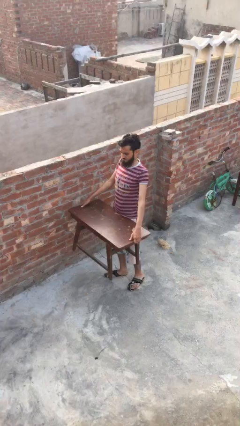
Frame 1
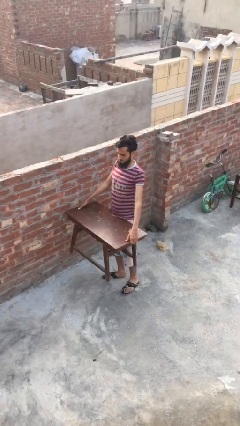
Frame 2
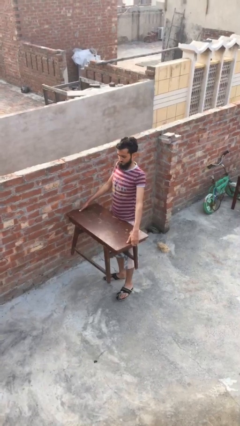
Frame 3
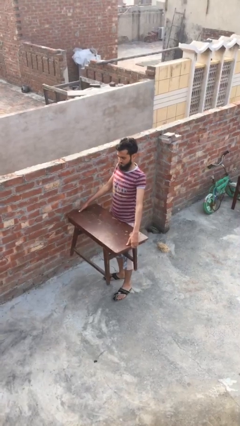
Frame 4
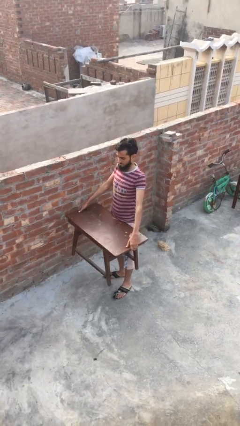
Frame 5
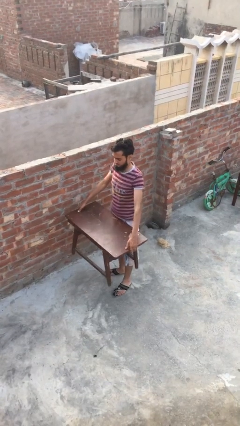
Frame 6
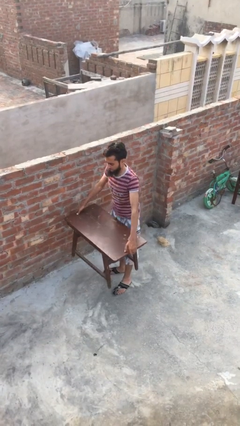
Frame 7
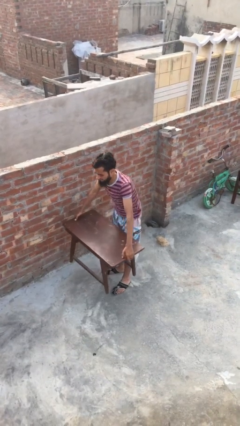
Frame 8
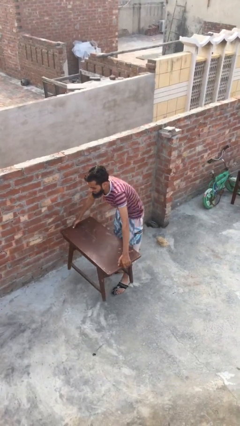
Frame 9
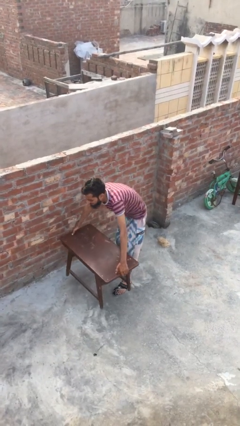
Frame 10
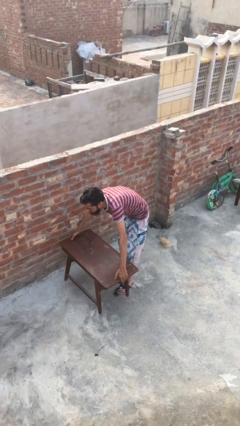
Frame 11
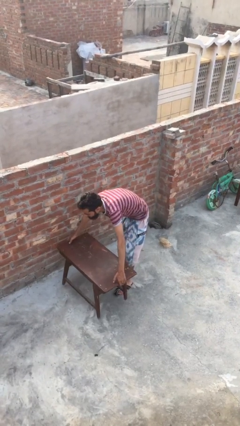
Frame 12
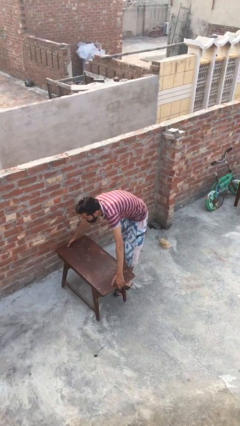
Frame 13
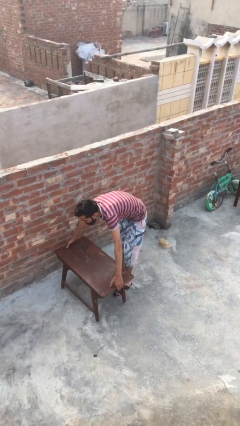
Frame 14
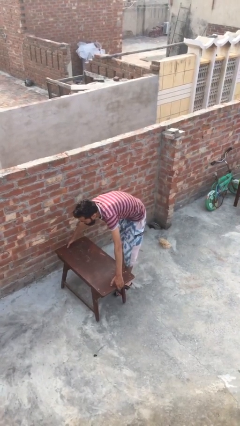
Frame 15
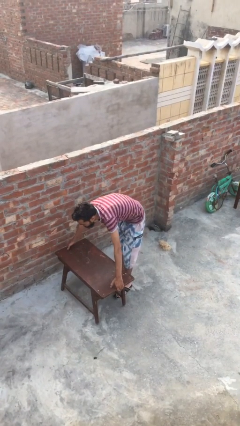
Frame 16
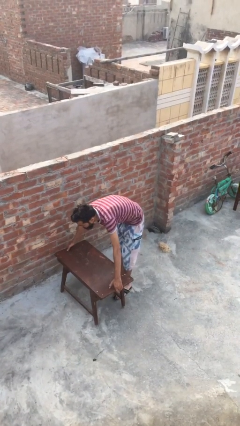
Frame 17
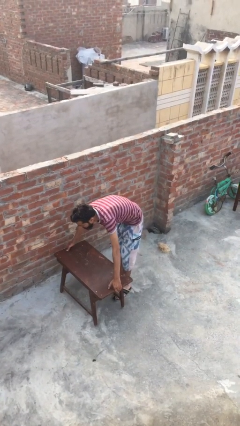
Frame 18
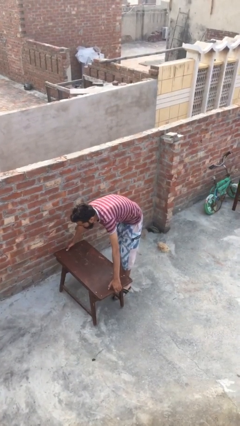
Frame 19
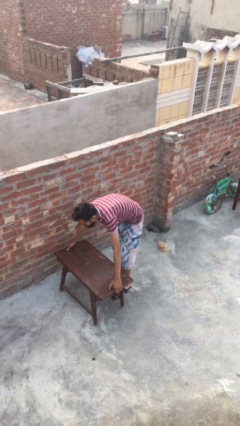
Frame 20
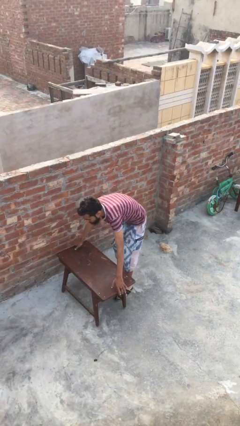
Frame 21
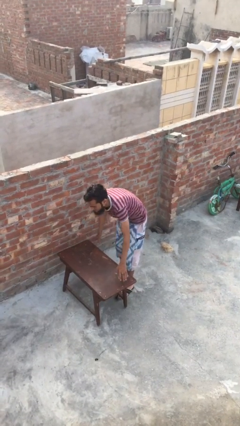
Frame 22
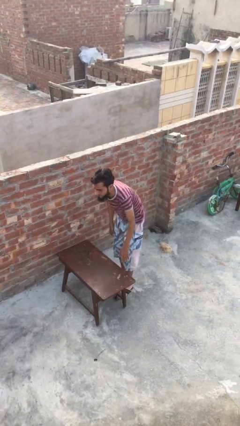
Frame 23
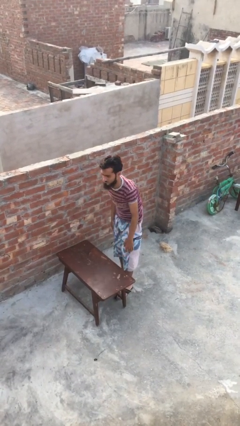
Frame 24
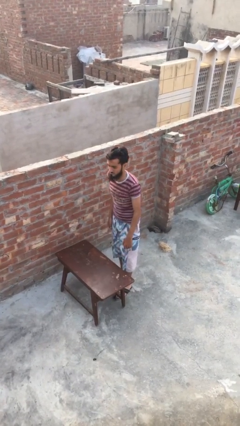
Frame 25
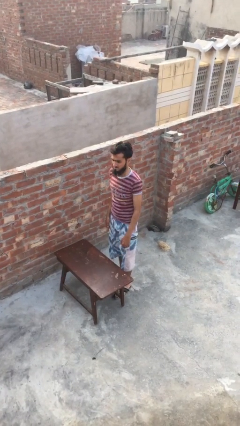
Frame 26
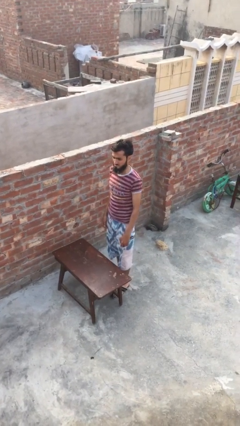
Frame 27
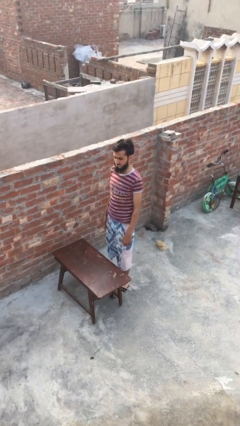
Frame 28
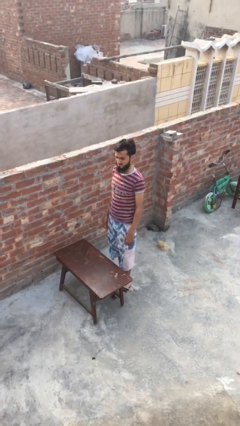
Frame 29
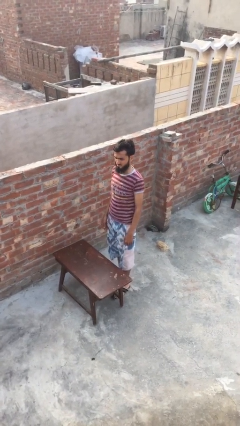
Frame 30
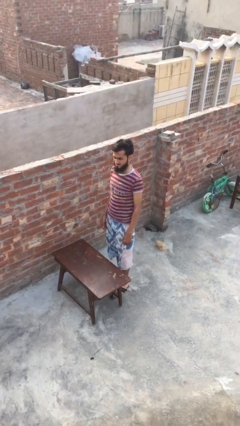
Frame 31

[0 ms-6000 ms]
person puts down object on floor

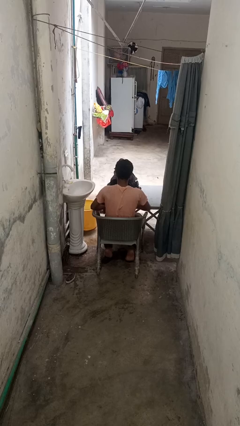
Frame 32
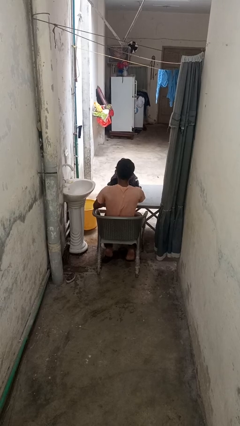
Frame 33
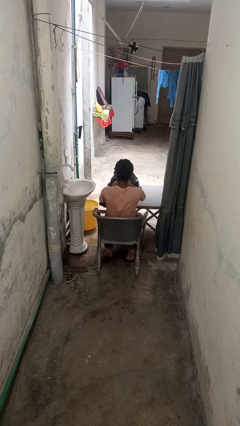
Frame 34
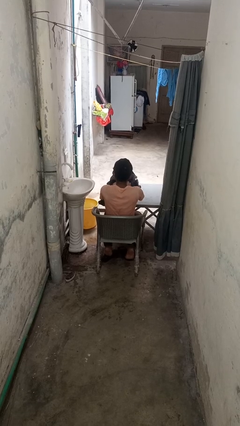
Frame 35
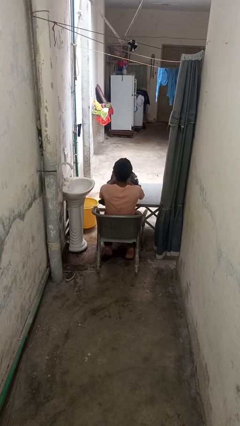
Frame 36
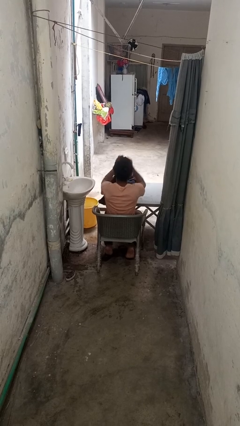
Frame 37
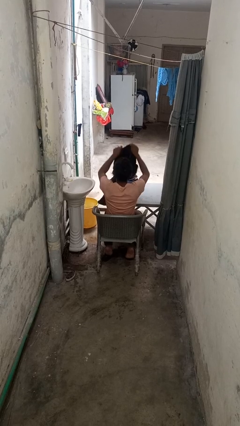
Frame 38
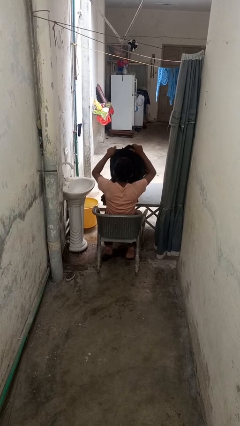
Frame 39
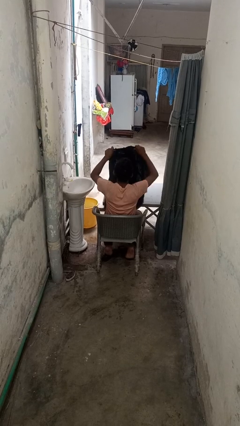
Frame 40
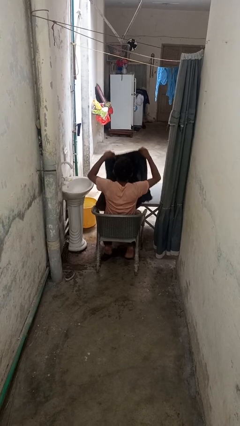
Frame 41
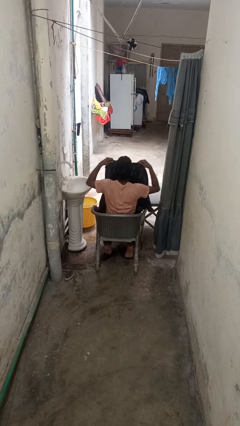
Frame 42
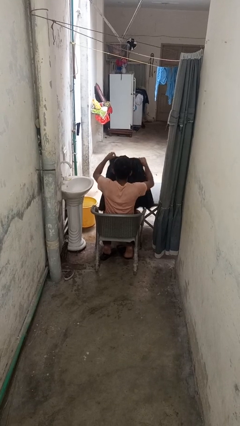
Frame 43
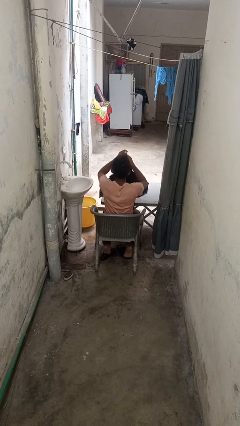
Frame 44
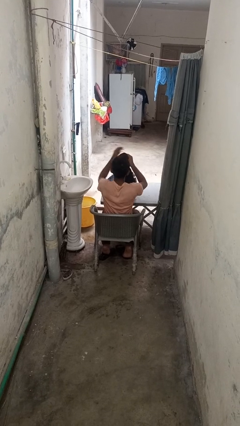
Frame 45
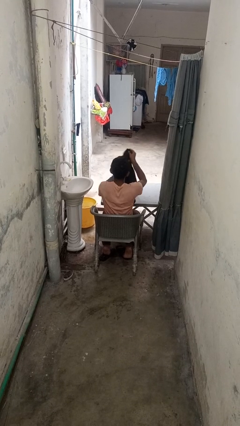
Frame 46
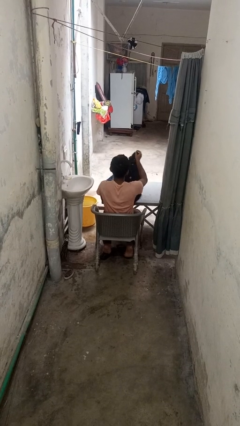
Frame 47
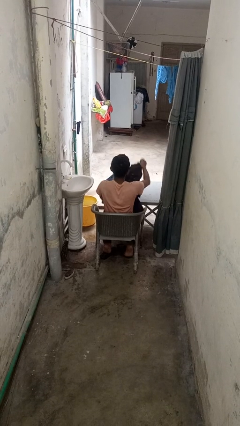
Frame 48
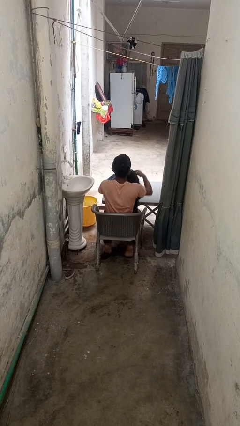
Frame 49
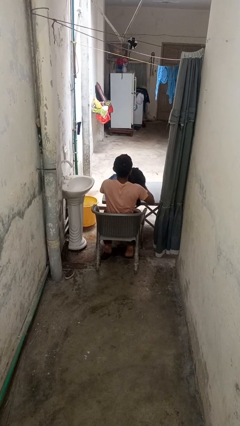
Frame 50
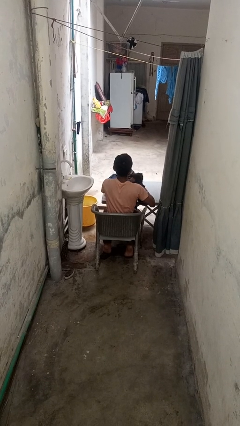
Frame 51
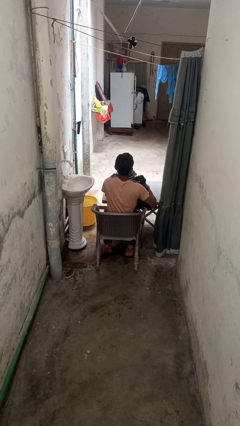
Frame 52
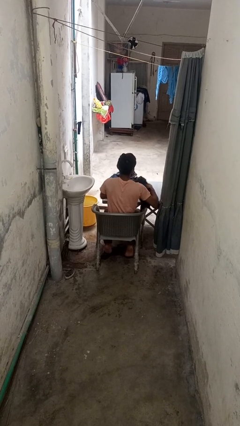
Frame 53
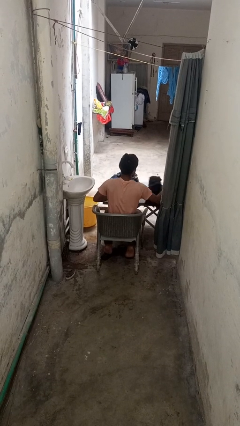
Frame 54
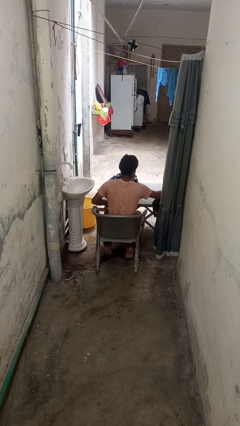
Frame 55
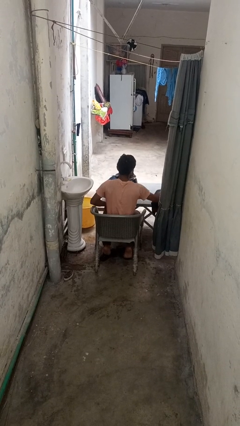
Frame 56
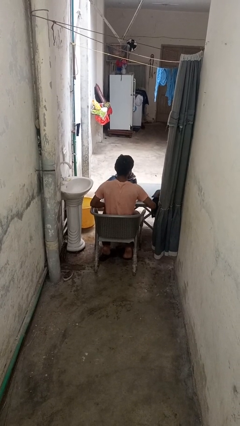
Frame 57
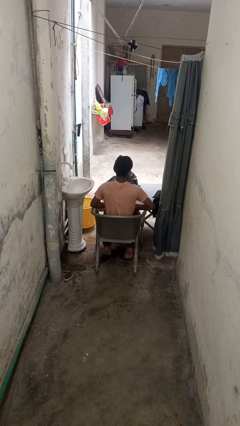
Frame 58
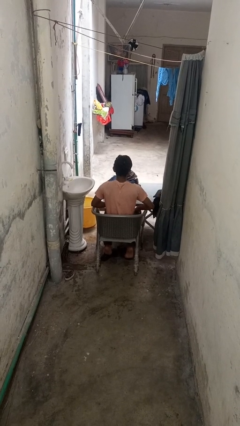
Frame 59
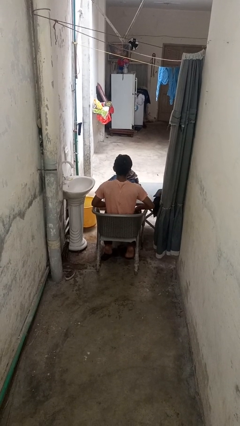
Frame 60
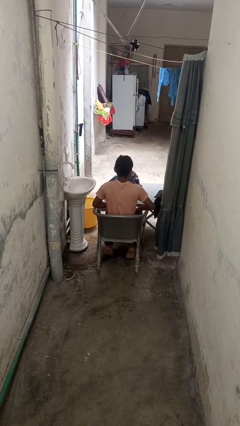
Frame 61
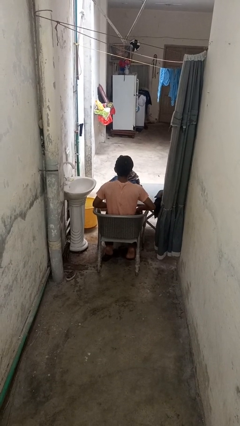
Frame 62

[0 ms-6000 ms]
person folds shirt

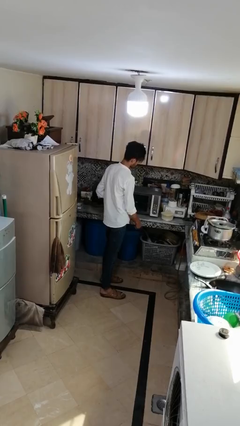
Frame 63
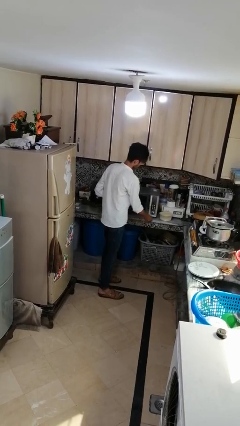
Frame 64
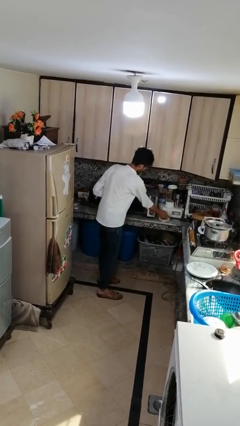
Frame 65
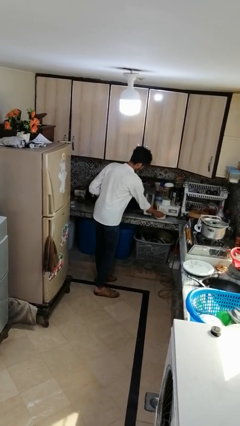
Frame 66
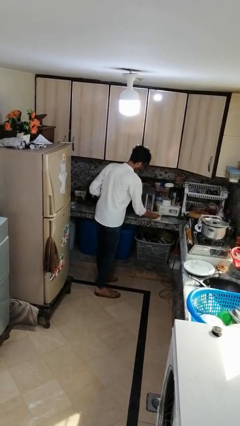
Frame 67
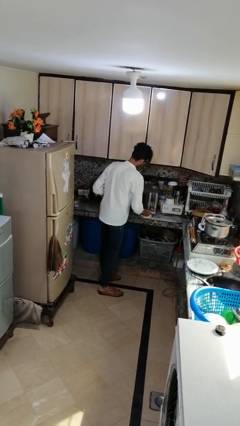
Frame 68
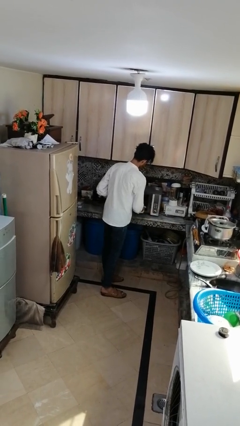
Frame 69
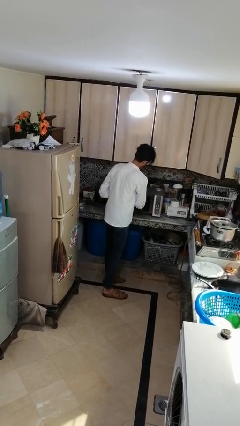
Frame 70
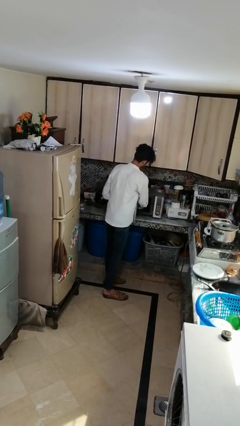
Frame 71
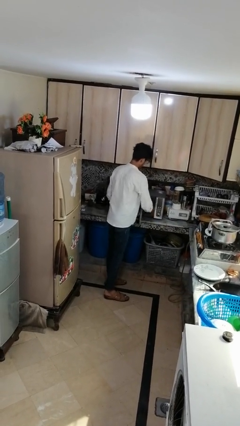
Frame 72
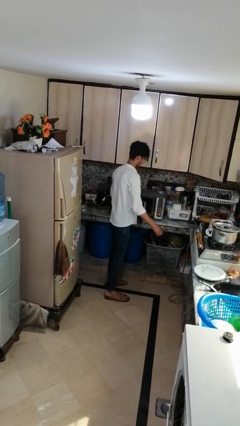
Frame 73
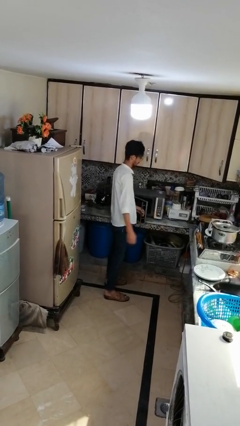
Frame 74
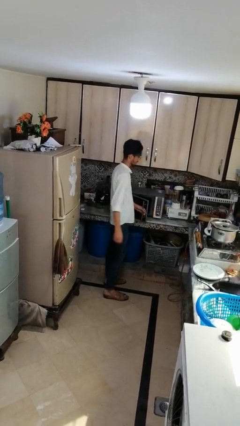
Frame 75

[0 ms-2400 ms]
person puts object into microwave

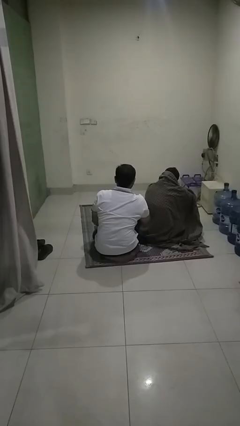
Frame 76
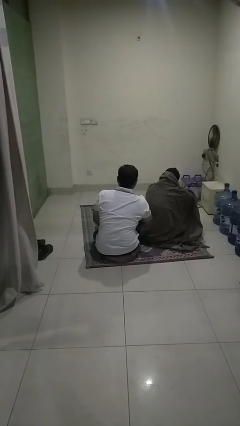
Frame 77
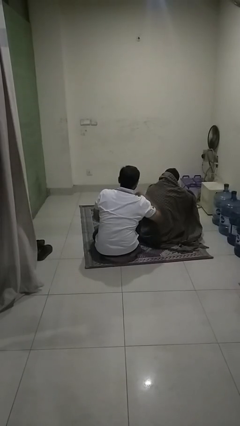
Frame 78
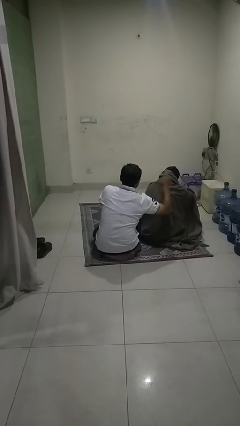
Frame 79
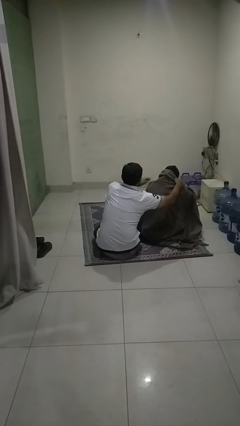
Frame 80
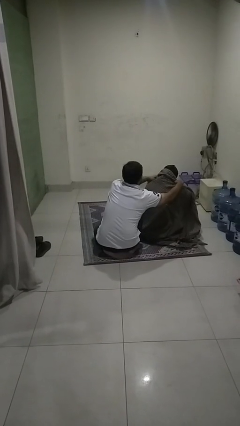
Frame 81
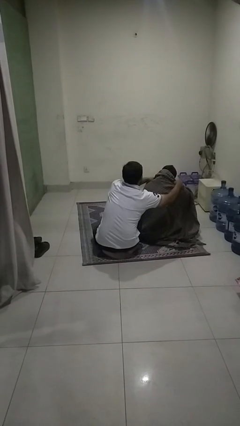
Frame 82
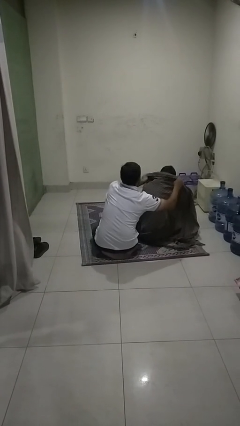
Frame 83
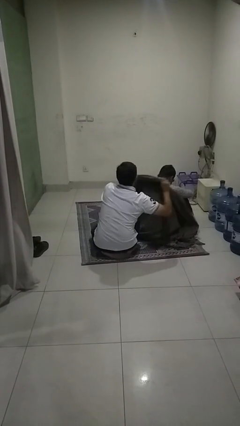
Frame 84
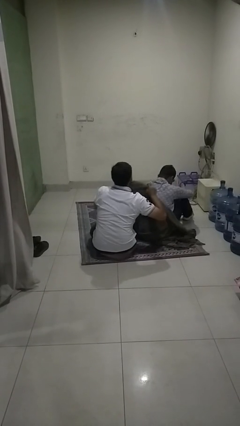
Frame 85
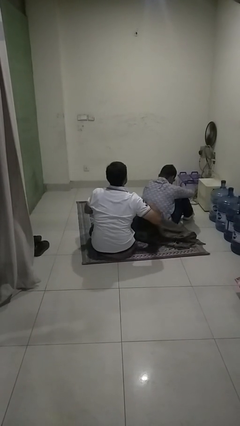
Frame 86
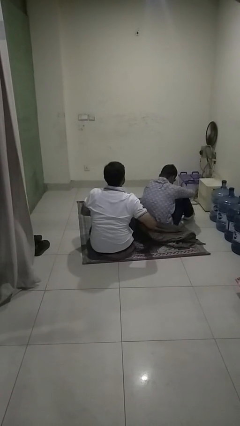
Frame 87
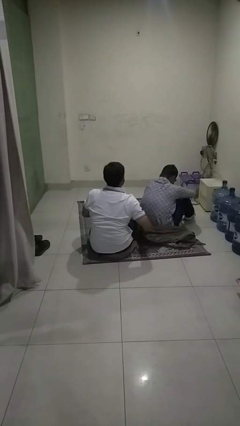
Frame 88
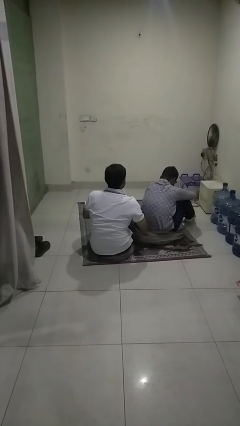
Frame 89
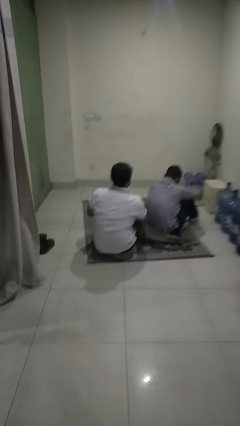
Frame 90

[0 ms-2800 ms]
person uncovers friend with blanket

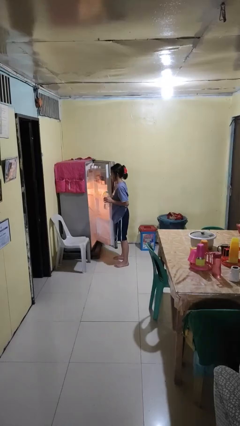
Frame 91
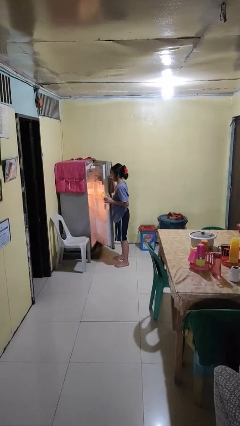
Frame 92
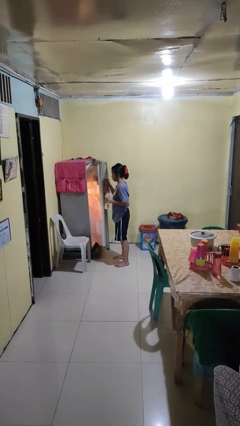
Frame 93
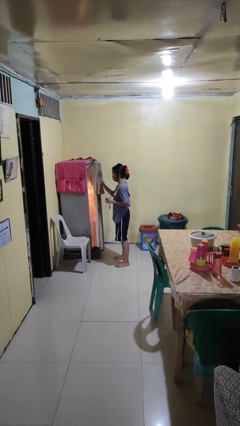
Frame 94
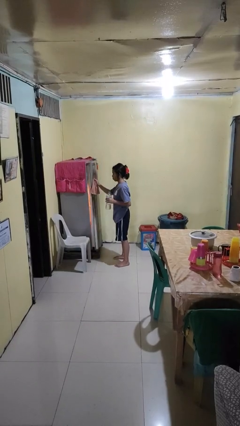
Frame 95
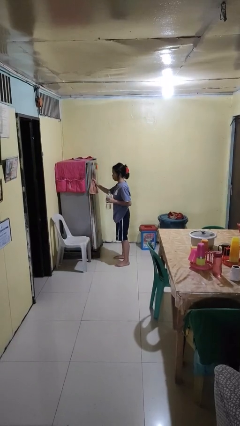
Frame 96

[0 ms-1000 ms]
person closes refrigerator
